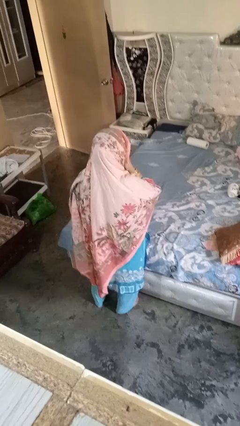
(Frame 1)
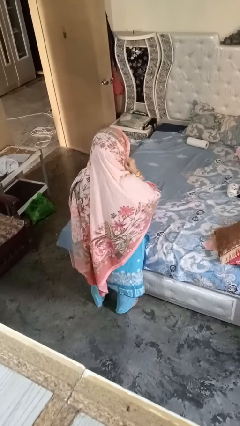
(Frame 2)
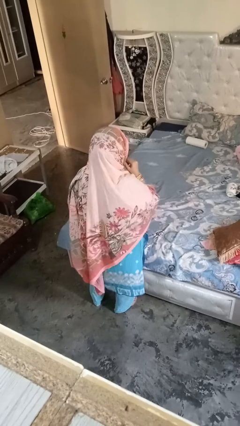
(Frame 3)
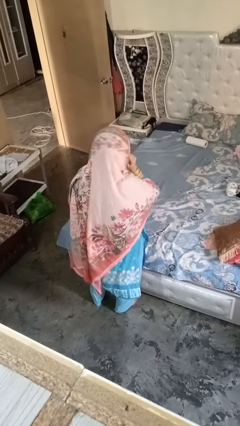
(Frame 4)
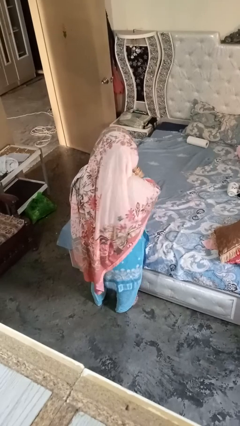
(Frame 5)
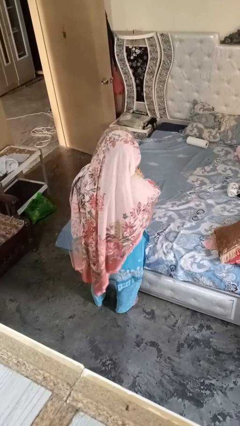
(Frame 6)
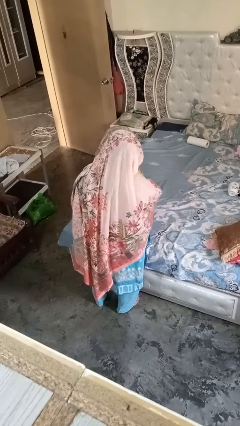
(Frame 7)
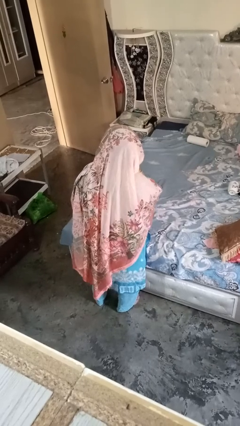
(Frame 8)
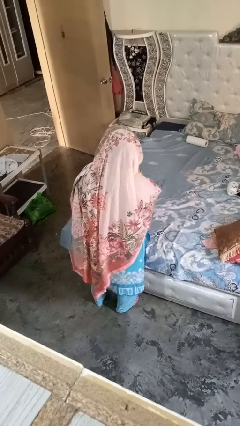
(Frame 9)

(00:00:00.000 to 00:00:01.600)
person gestures listen closely

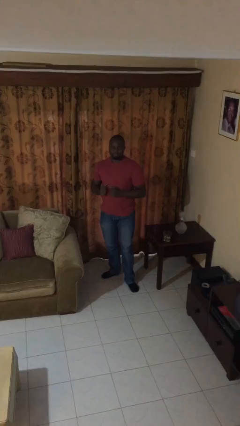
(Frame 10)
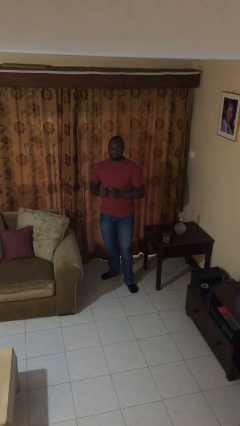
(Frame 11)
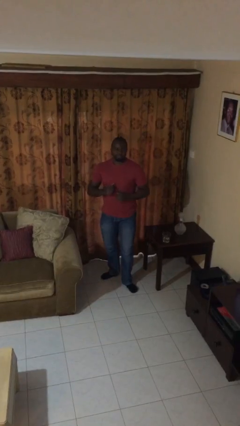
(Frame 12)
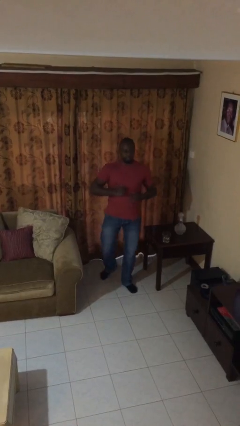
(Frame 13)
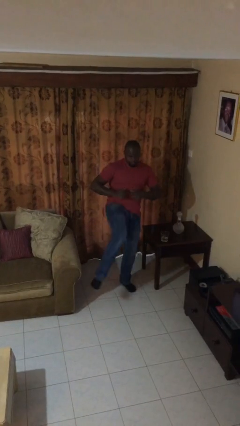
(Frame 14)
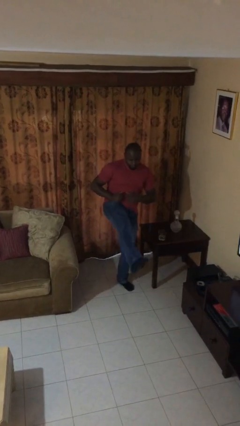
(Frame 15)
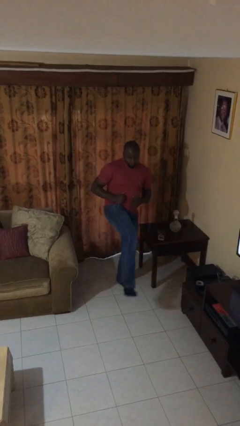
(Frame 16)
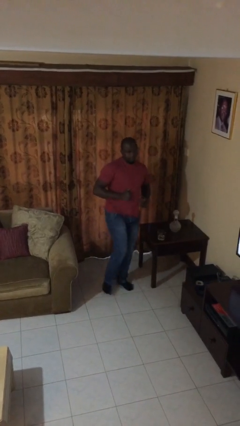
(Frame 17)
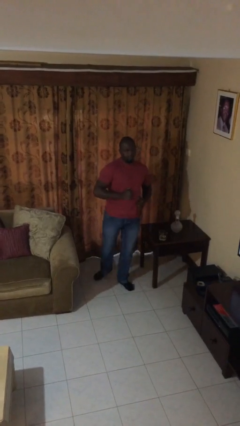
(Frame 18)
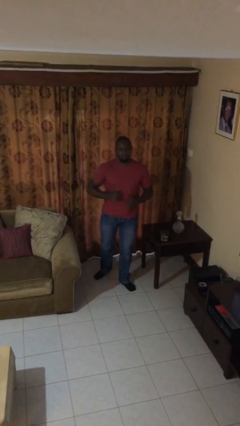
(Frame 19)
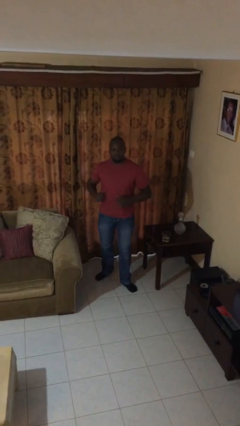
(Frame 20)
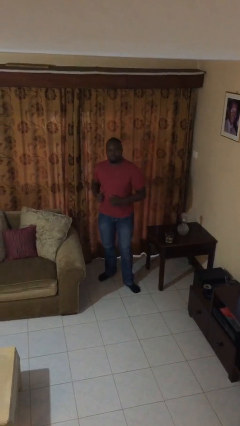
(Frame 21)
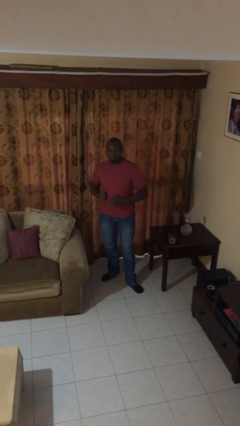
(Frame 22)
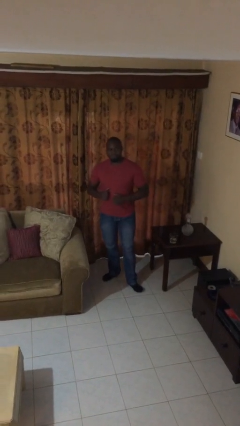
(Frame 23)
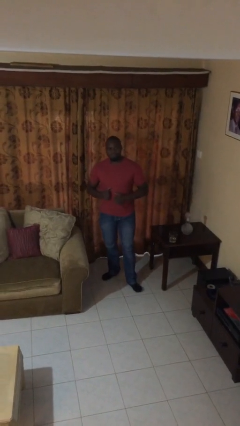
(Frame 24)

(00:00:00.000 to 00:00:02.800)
person karate kicks

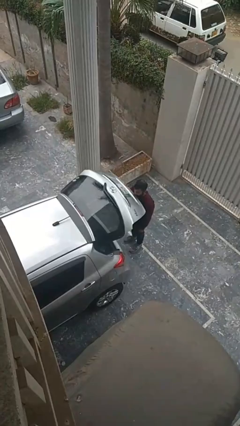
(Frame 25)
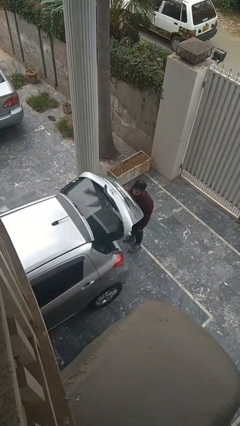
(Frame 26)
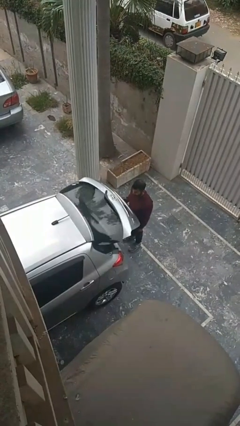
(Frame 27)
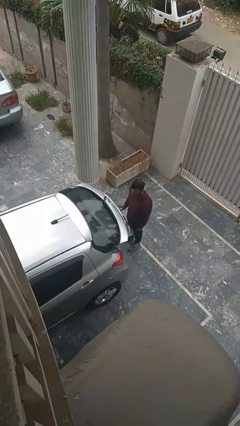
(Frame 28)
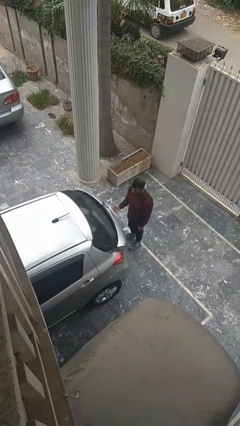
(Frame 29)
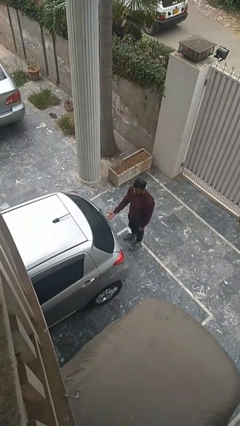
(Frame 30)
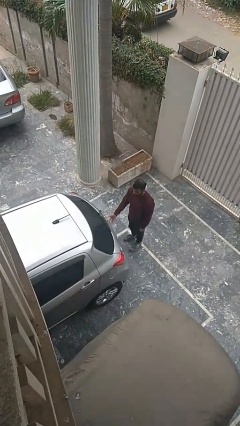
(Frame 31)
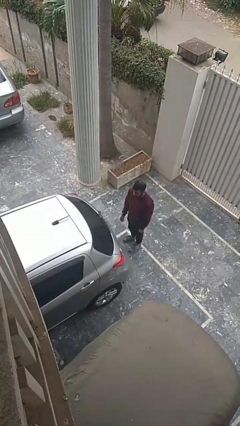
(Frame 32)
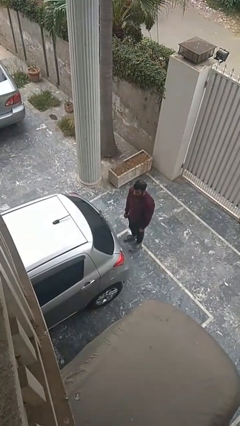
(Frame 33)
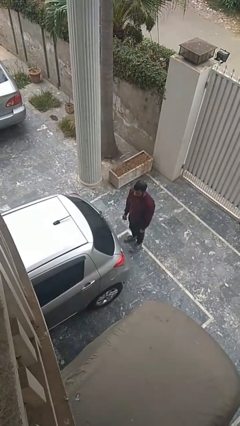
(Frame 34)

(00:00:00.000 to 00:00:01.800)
person closes car trunk

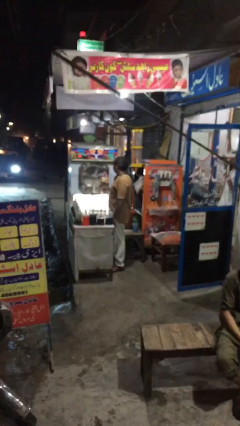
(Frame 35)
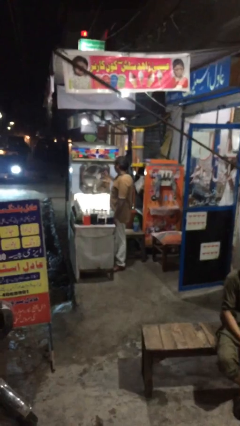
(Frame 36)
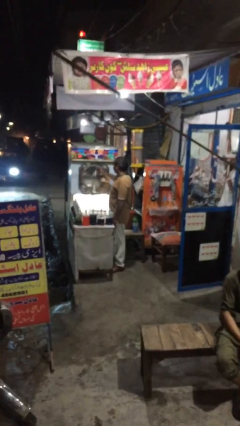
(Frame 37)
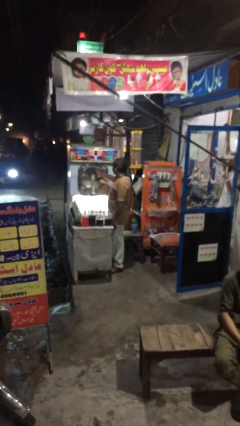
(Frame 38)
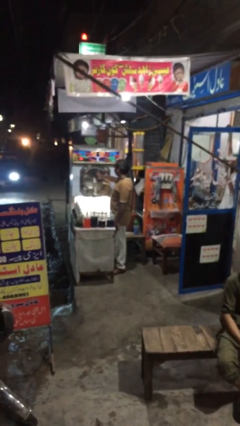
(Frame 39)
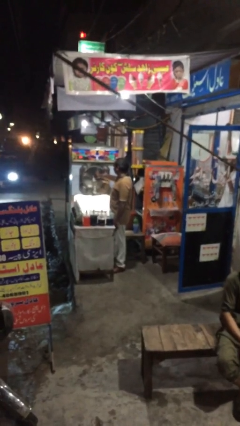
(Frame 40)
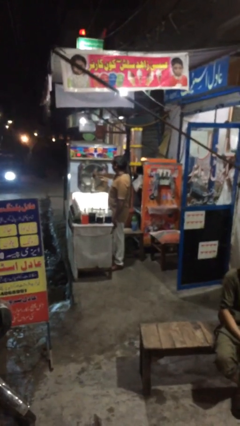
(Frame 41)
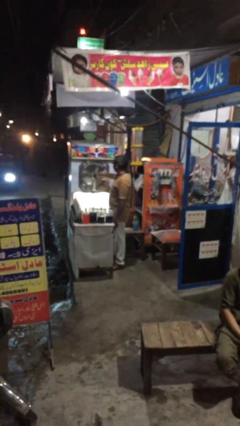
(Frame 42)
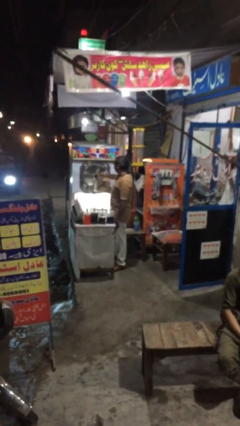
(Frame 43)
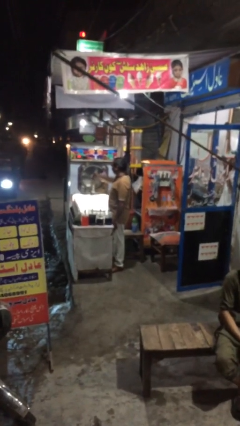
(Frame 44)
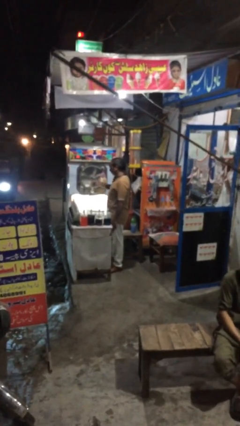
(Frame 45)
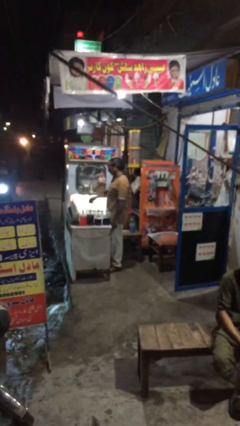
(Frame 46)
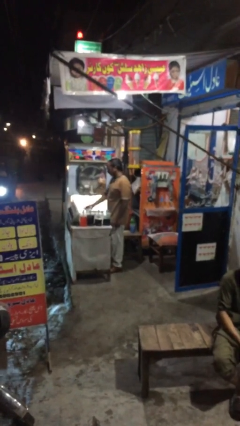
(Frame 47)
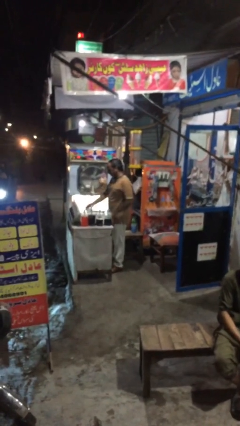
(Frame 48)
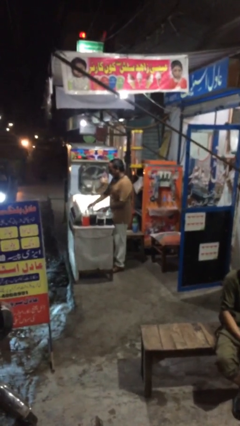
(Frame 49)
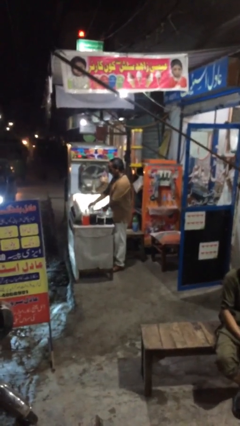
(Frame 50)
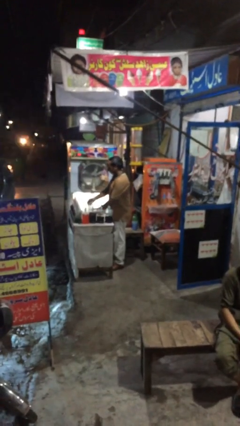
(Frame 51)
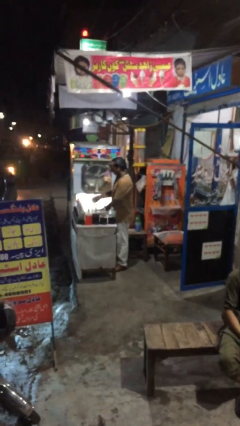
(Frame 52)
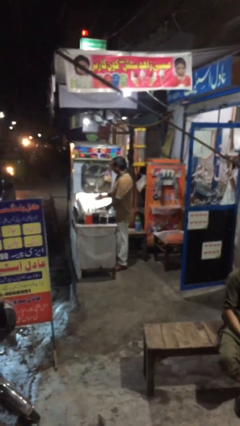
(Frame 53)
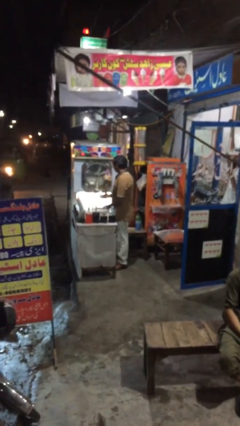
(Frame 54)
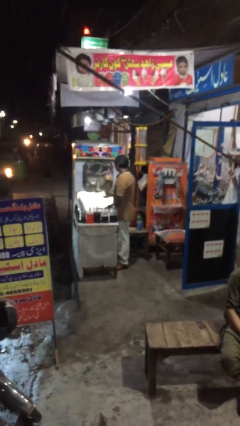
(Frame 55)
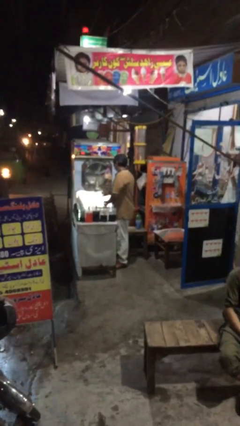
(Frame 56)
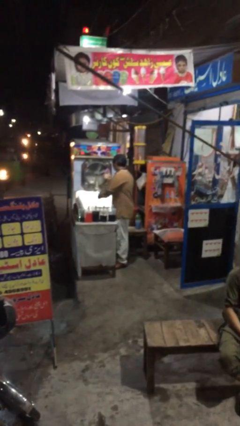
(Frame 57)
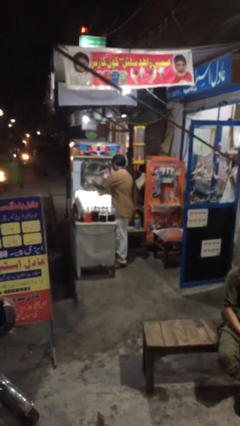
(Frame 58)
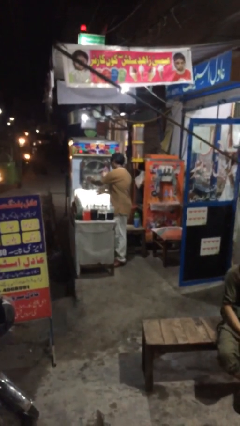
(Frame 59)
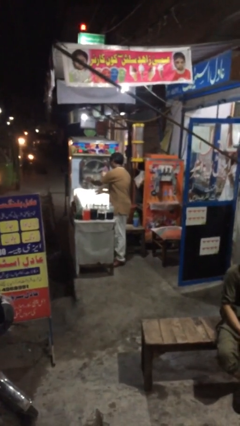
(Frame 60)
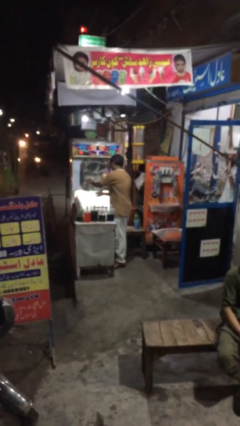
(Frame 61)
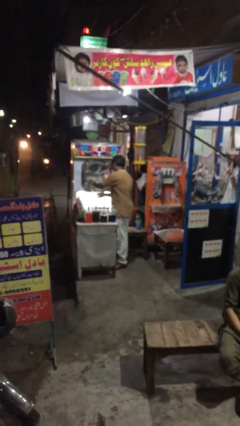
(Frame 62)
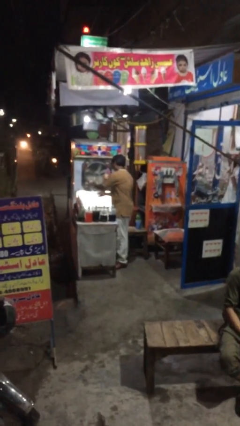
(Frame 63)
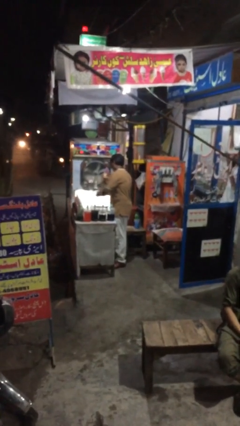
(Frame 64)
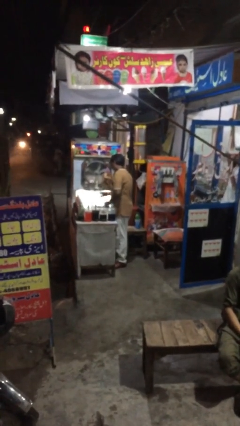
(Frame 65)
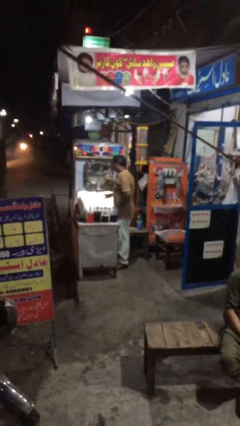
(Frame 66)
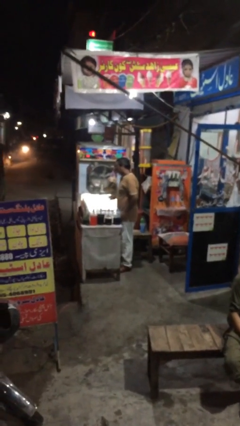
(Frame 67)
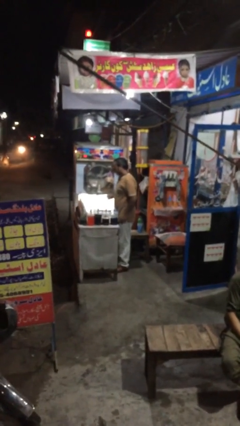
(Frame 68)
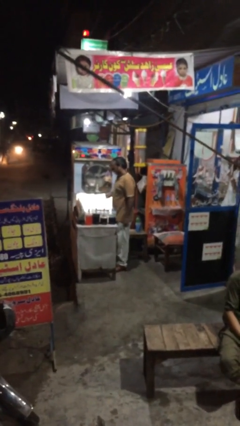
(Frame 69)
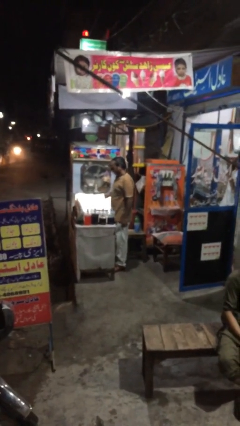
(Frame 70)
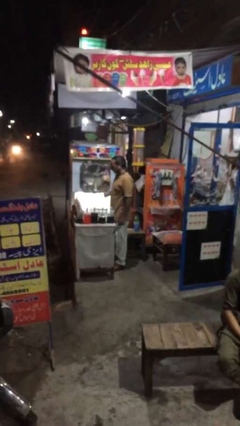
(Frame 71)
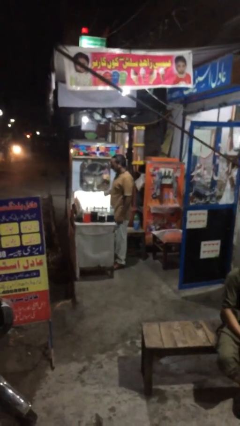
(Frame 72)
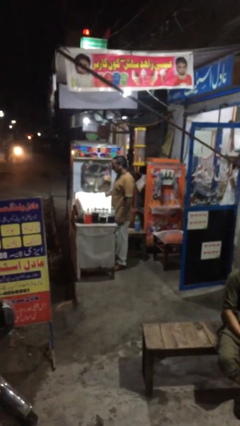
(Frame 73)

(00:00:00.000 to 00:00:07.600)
person purchases from machine

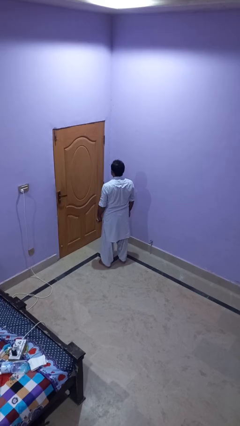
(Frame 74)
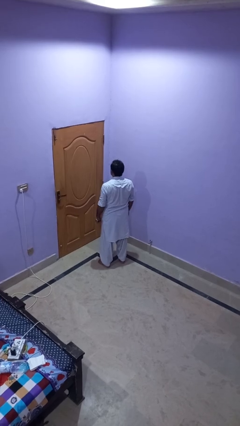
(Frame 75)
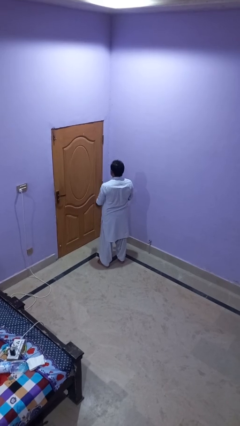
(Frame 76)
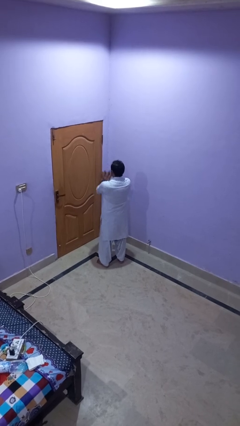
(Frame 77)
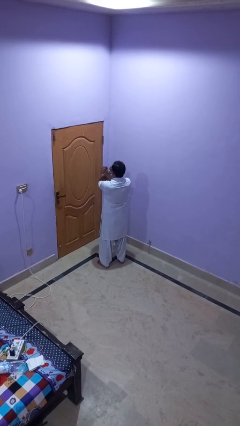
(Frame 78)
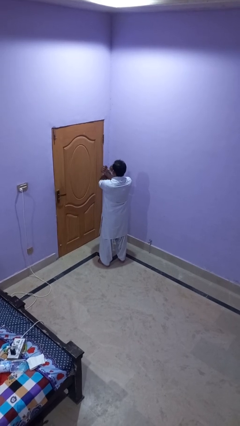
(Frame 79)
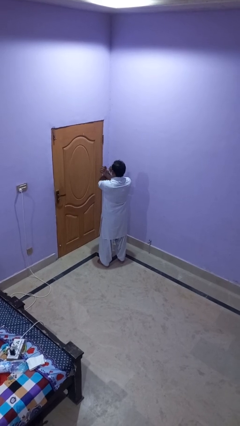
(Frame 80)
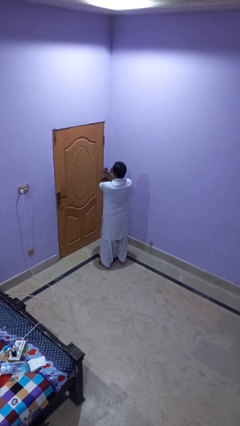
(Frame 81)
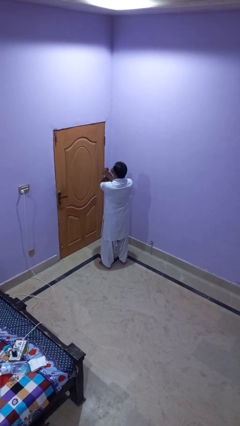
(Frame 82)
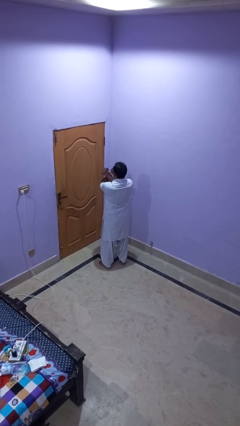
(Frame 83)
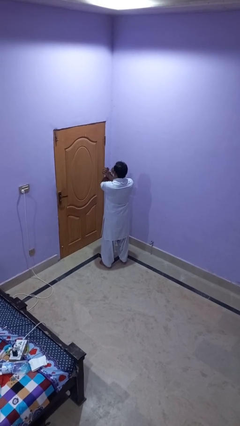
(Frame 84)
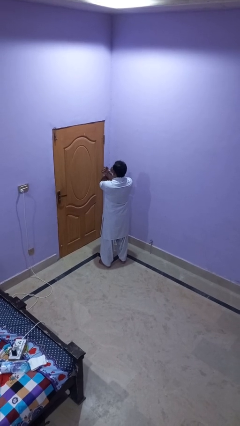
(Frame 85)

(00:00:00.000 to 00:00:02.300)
person crosses arms

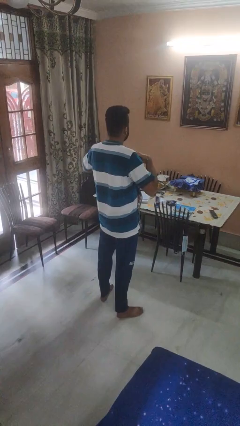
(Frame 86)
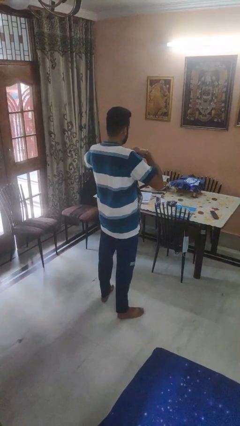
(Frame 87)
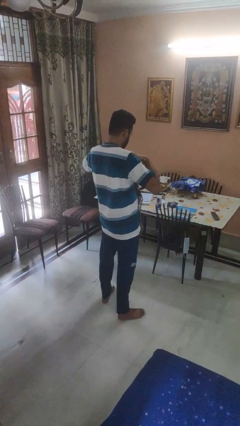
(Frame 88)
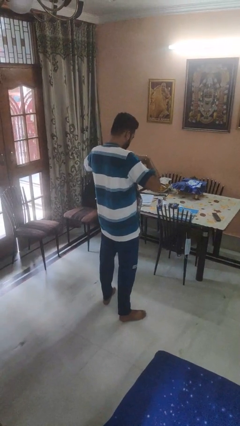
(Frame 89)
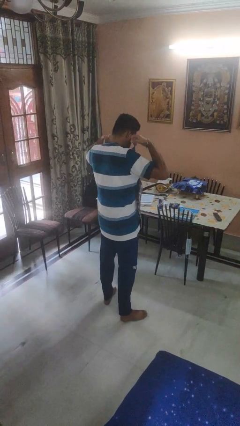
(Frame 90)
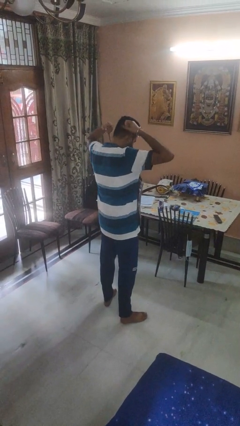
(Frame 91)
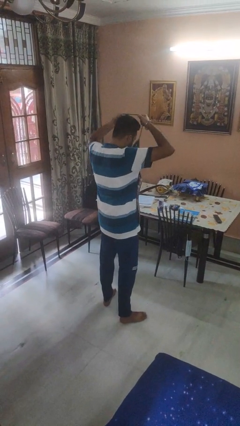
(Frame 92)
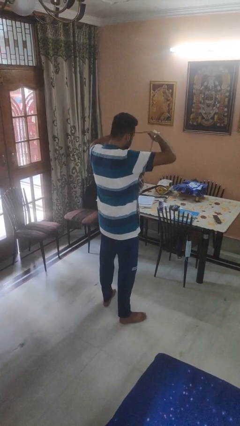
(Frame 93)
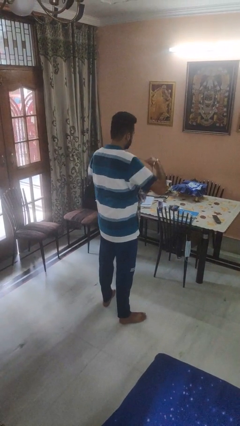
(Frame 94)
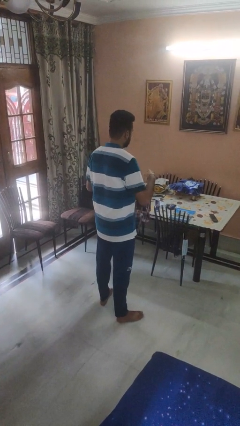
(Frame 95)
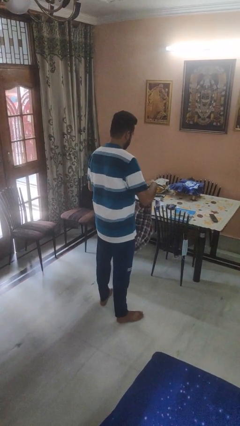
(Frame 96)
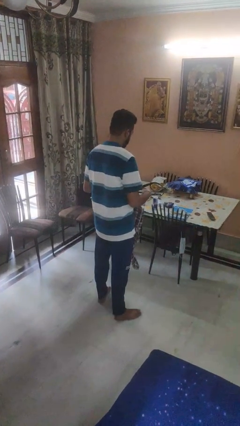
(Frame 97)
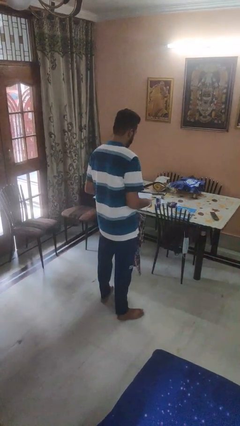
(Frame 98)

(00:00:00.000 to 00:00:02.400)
person takes off apron
